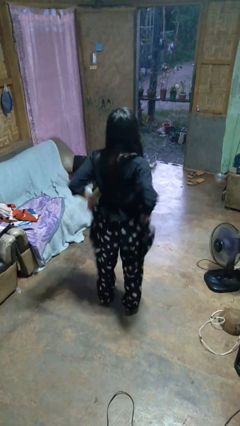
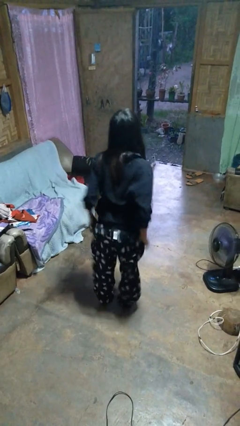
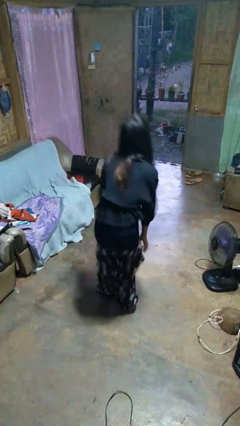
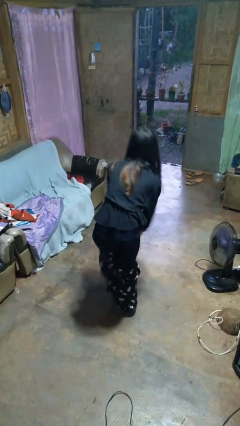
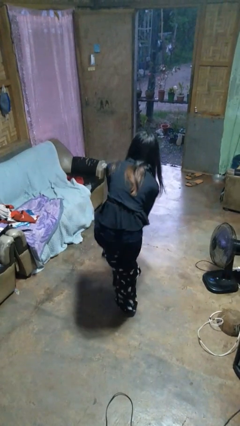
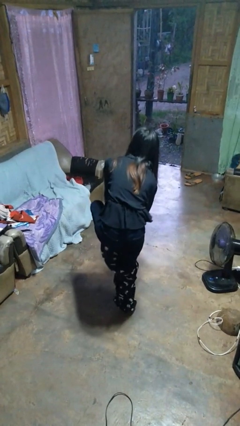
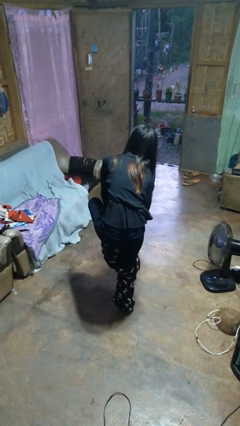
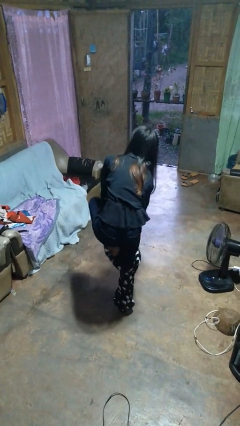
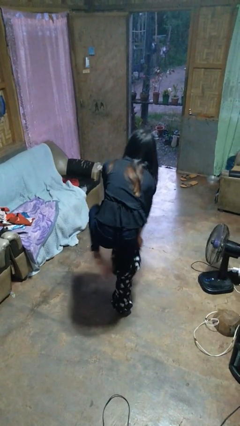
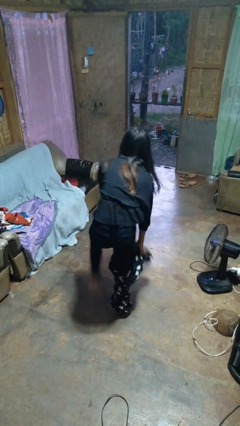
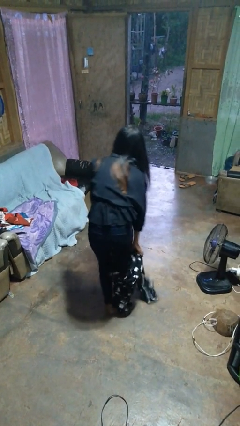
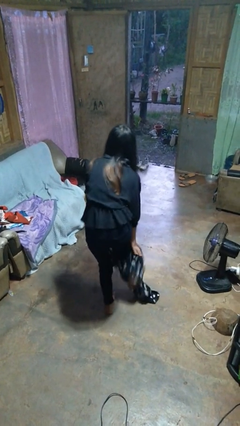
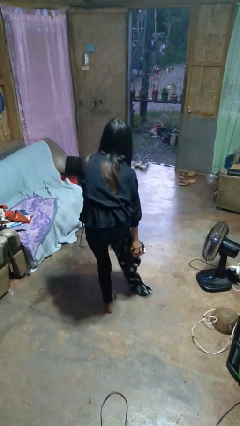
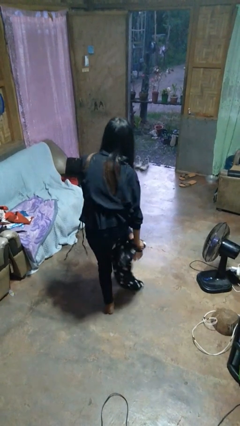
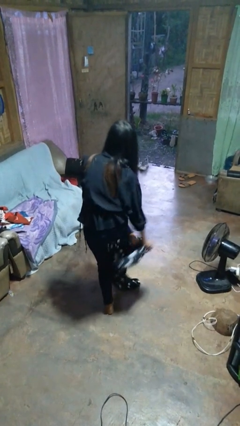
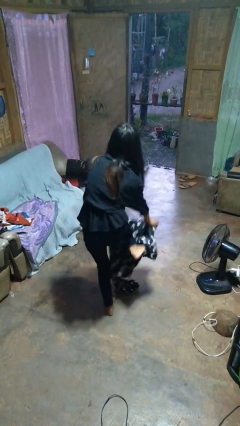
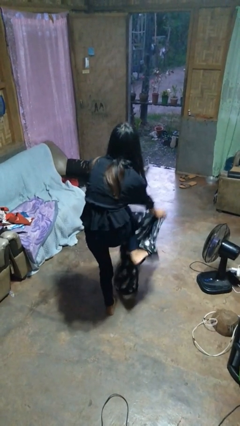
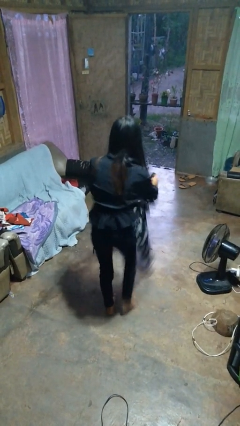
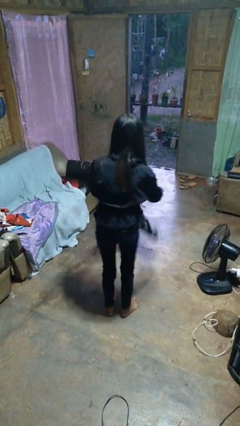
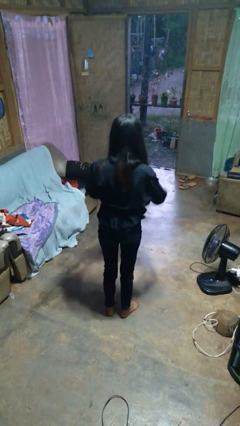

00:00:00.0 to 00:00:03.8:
person takes off pants

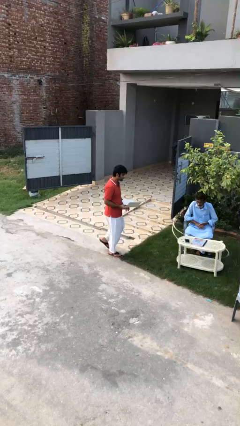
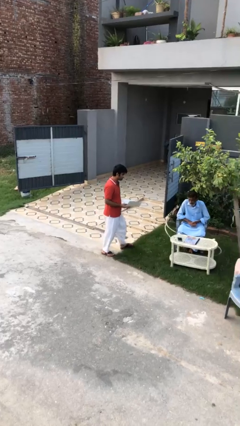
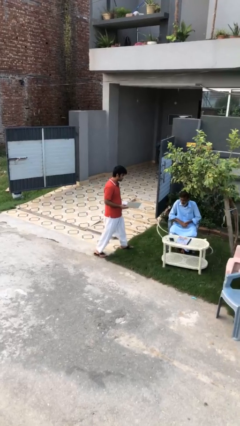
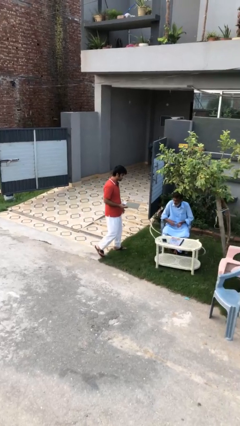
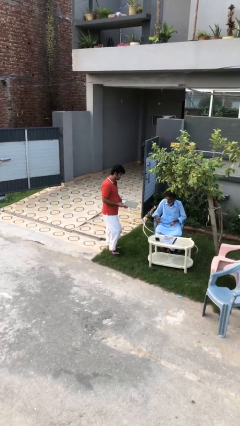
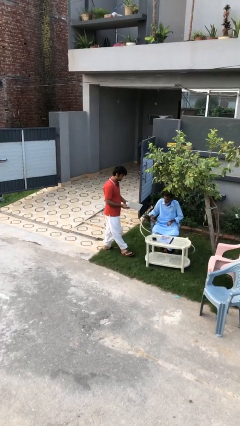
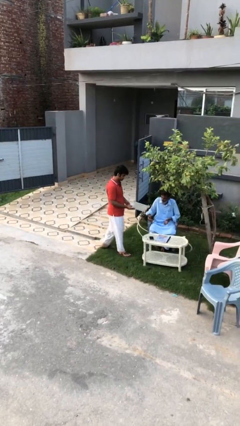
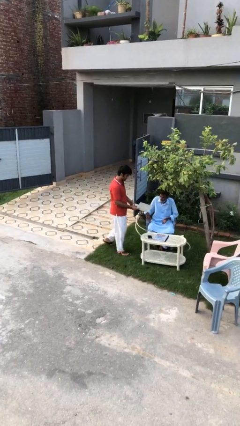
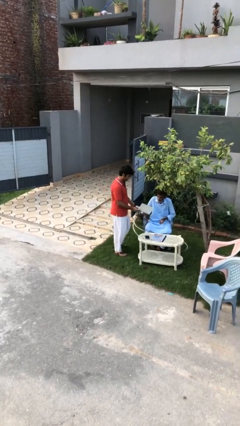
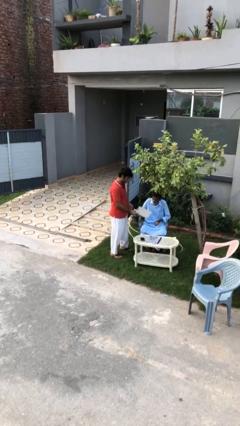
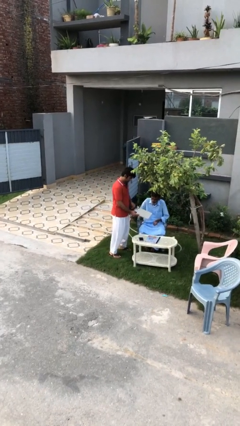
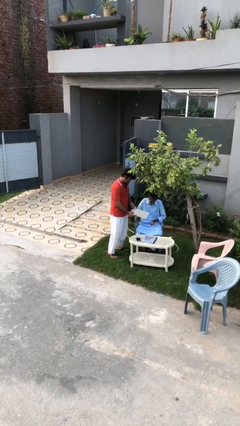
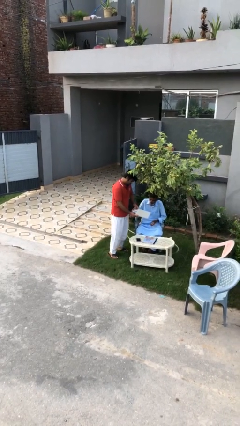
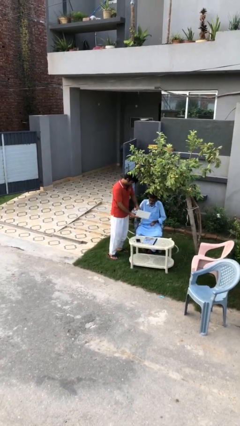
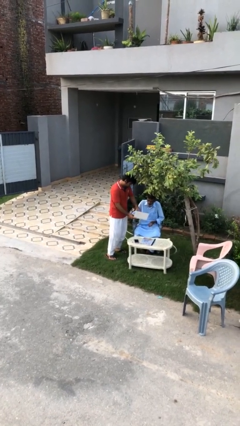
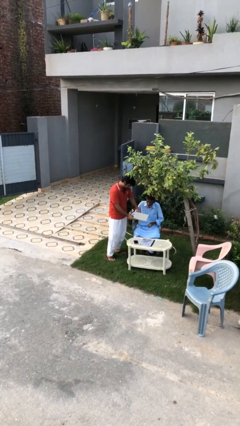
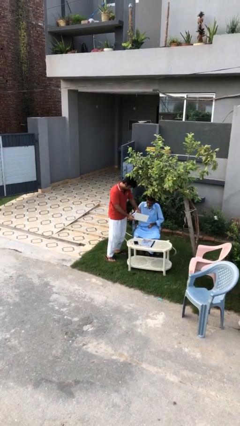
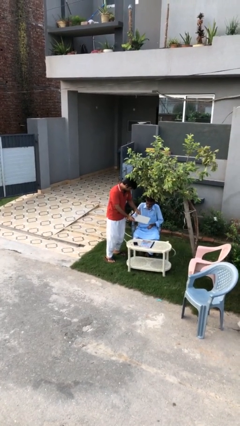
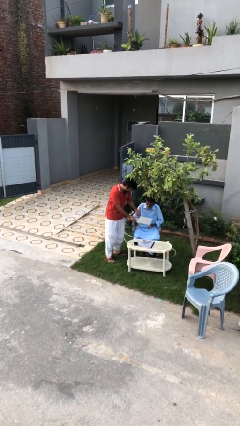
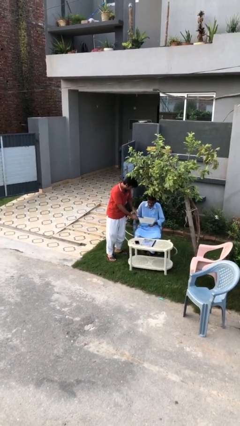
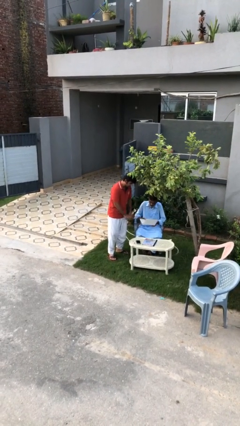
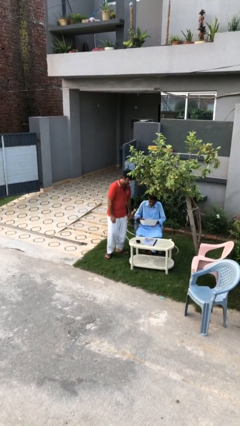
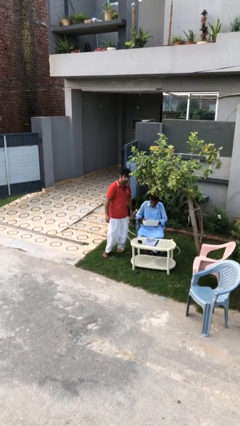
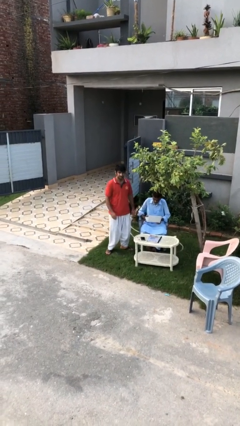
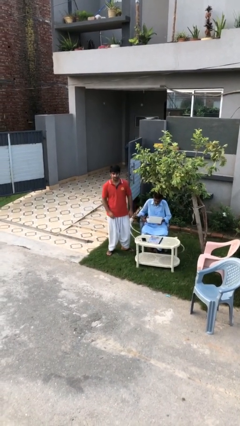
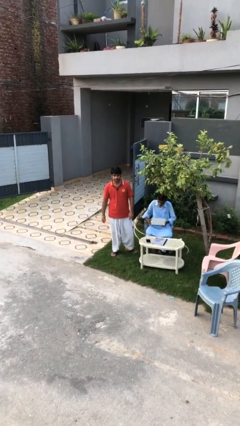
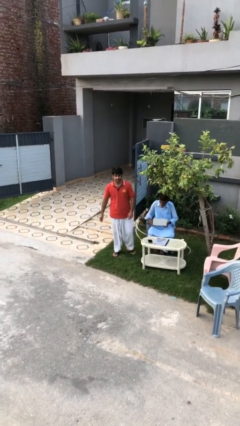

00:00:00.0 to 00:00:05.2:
person transfers object to person

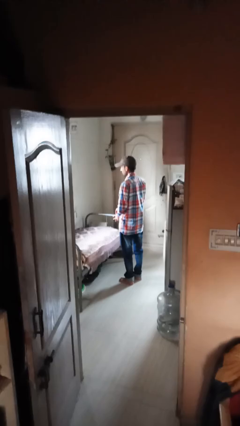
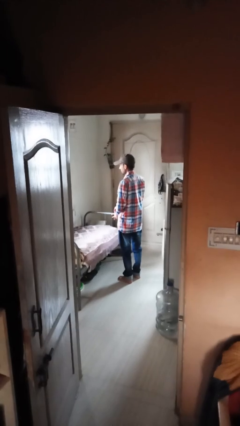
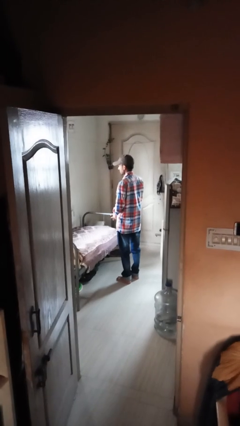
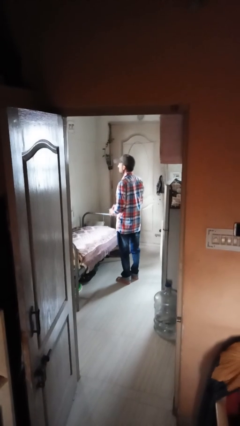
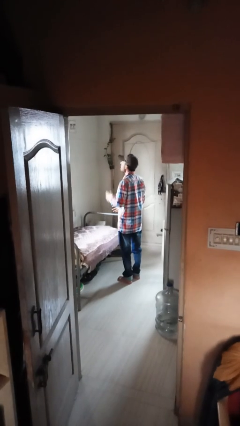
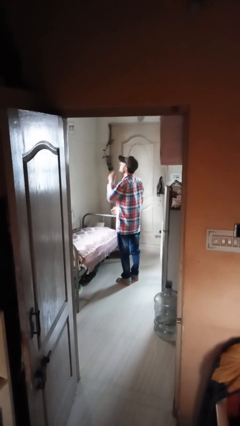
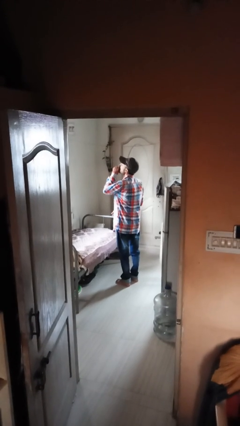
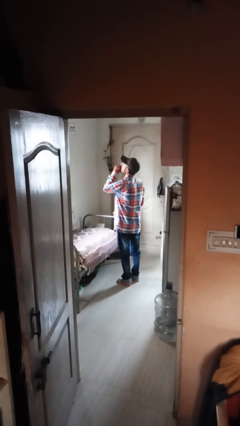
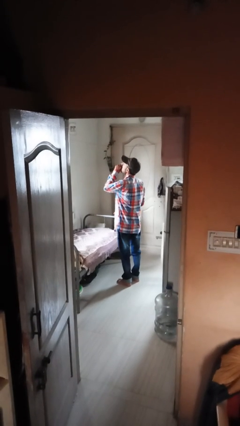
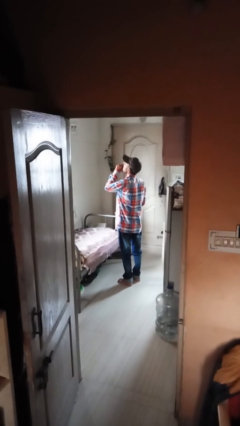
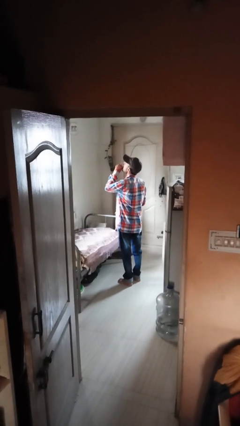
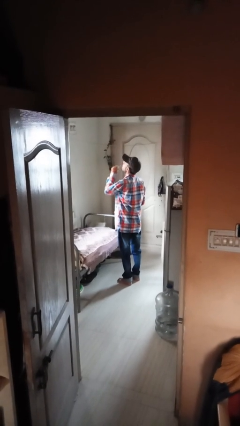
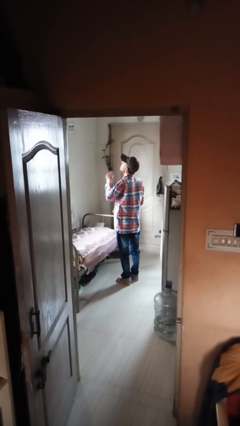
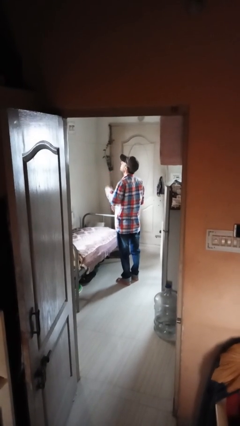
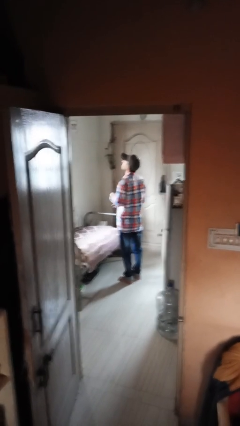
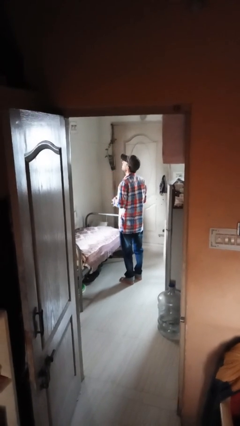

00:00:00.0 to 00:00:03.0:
person yawns

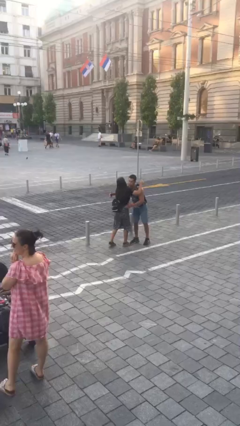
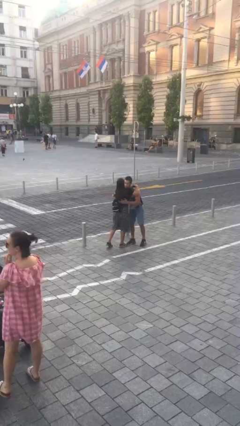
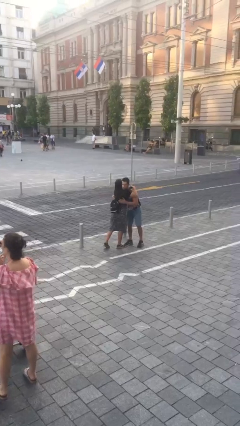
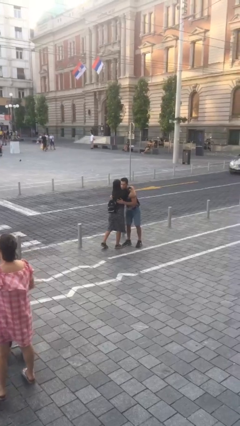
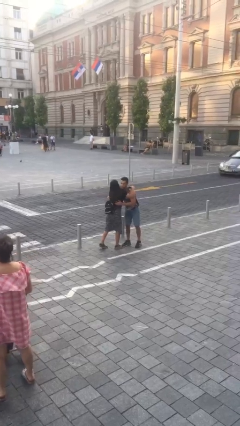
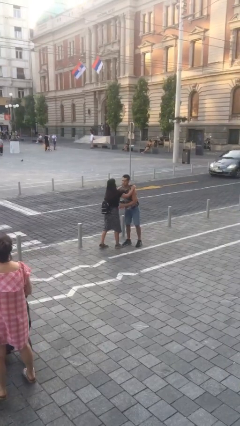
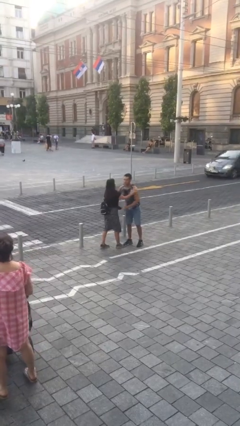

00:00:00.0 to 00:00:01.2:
person embraces person

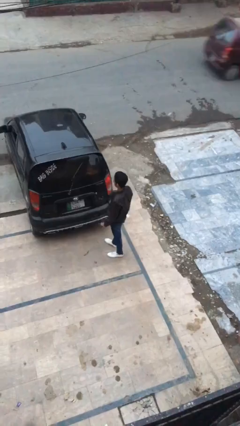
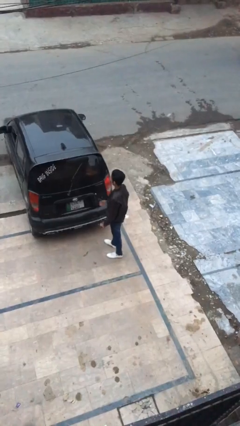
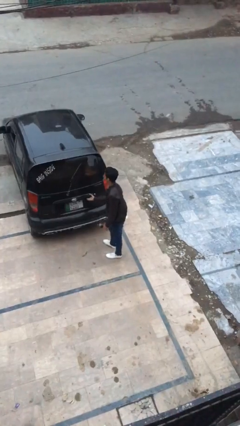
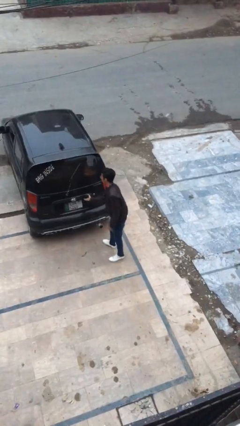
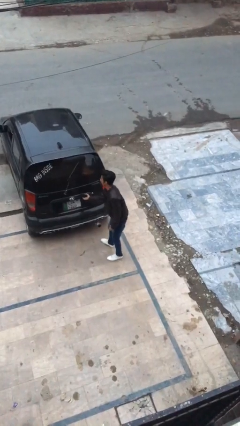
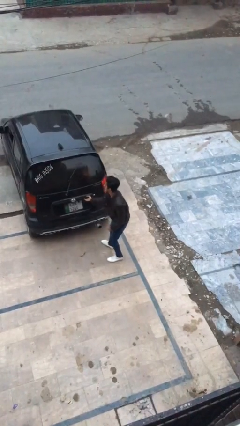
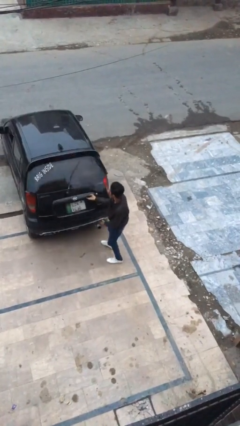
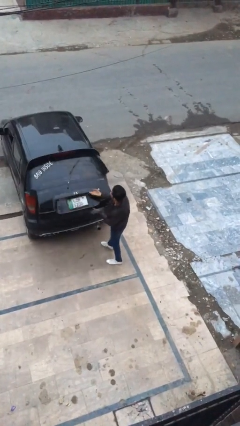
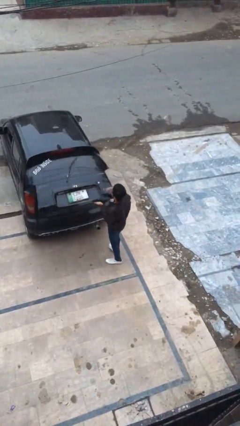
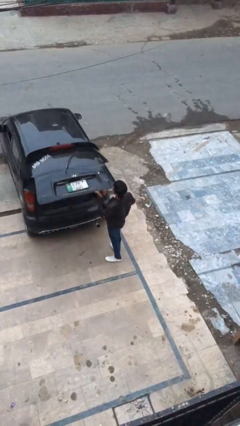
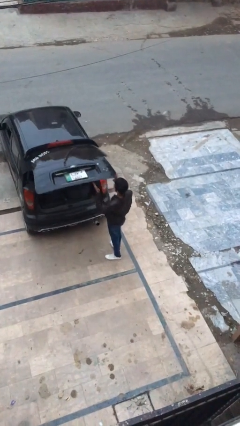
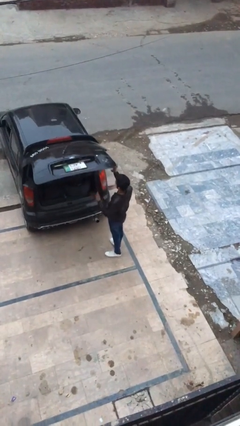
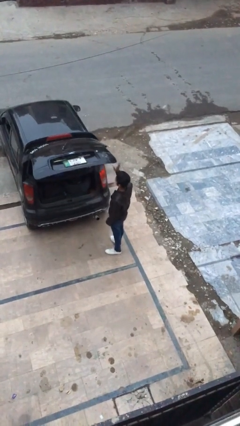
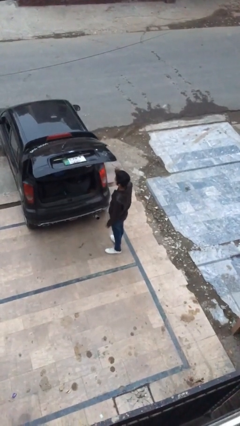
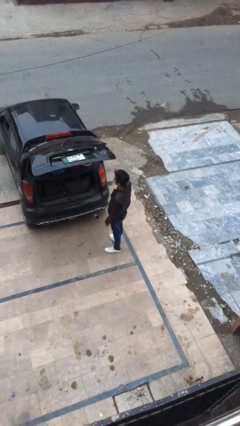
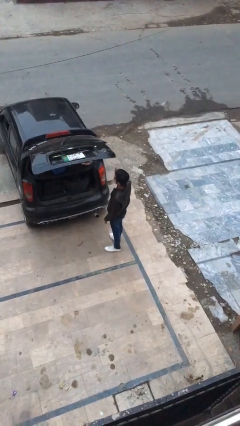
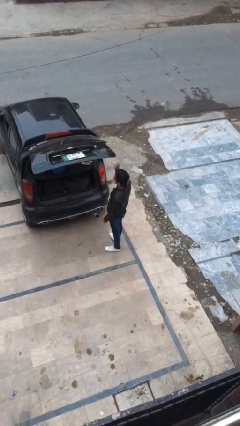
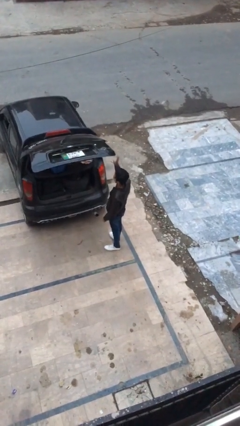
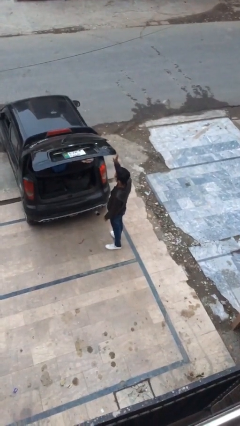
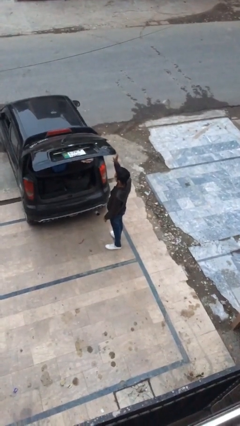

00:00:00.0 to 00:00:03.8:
person opens car trunk

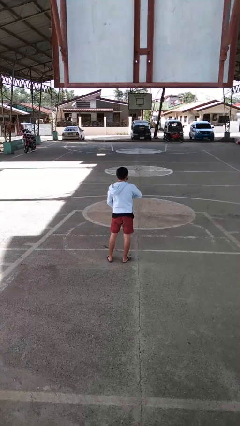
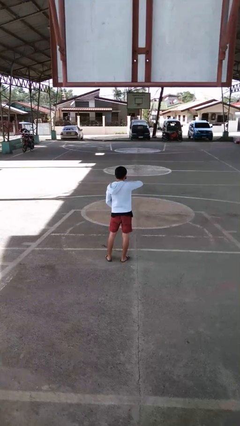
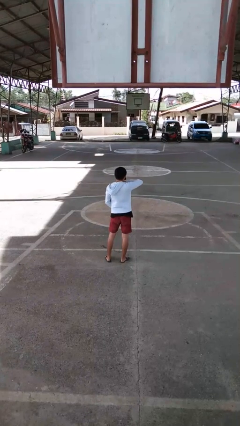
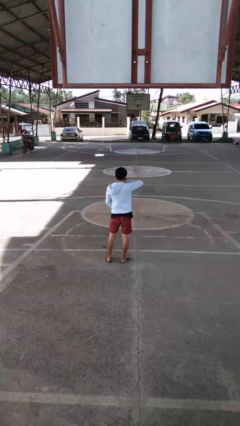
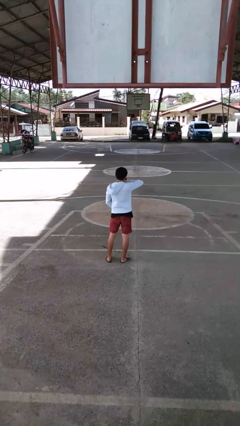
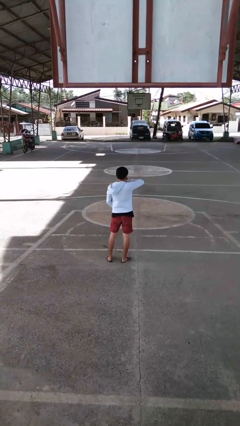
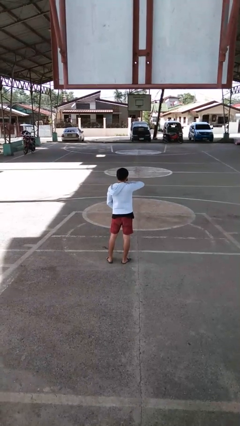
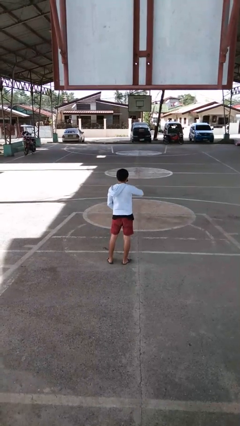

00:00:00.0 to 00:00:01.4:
person zips up jacket
